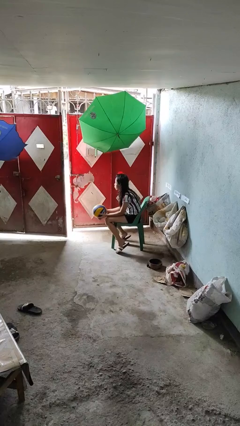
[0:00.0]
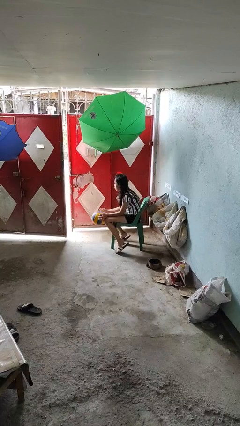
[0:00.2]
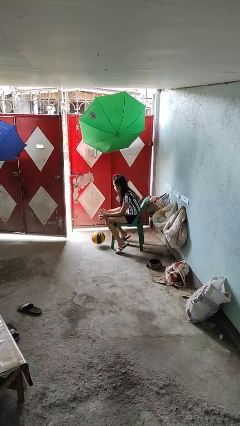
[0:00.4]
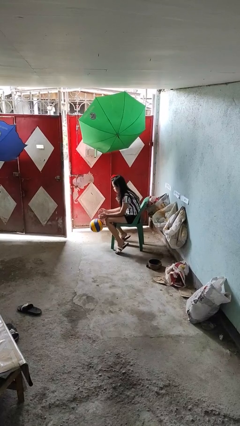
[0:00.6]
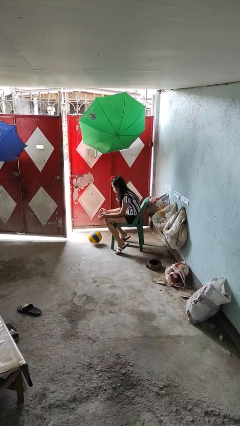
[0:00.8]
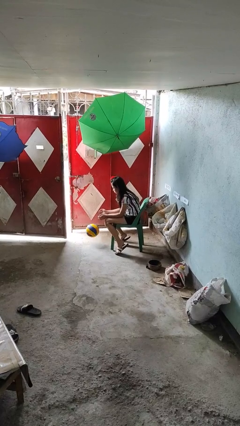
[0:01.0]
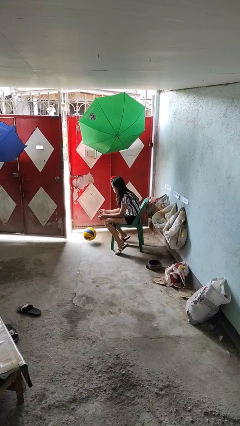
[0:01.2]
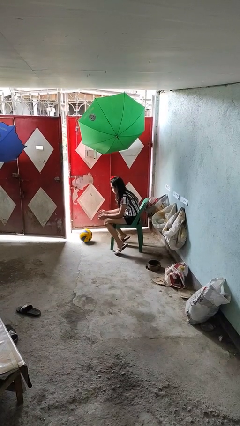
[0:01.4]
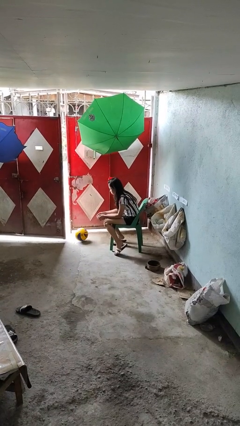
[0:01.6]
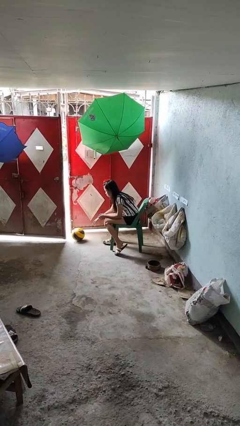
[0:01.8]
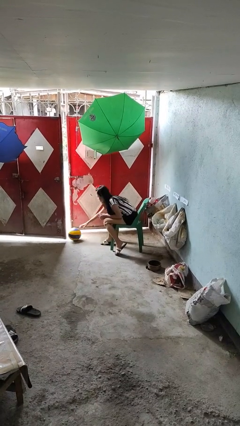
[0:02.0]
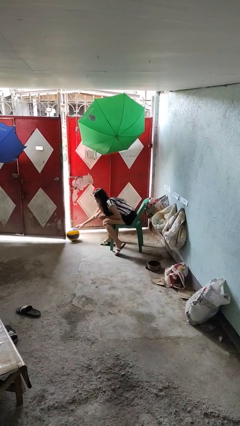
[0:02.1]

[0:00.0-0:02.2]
person drops object

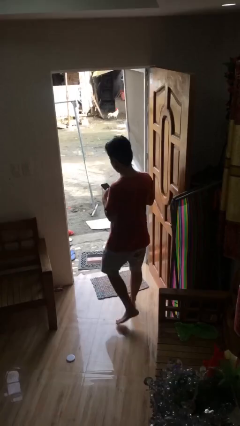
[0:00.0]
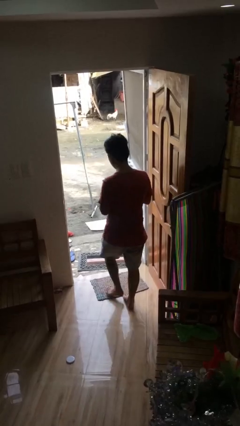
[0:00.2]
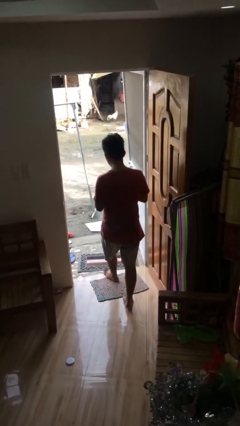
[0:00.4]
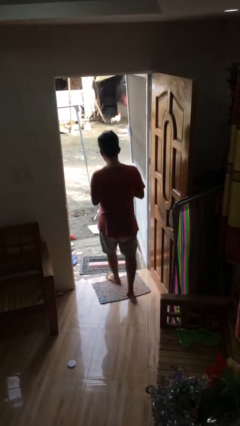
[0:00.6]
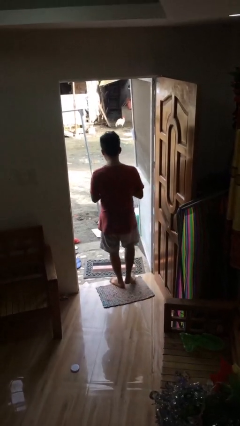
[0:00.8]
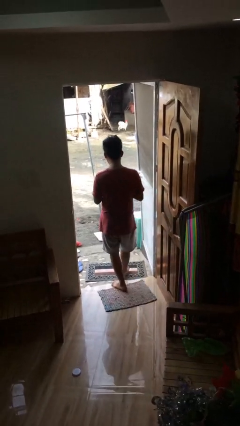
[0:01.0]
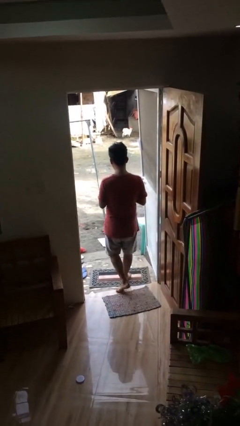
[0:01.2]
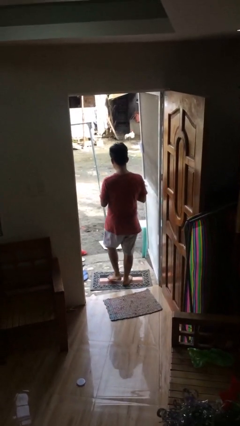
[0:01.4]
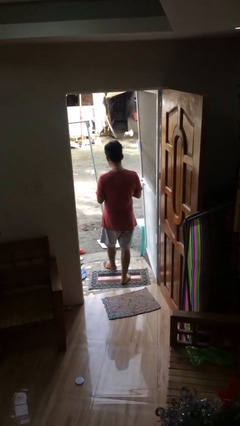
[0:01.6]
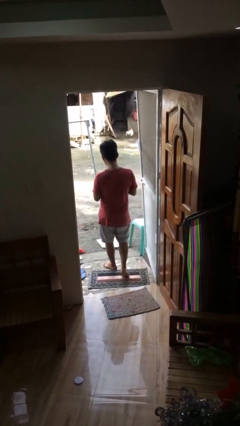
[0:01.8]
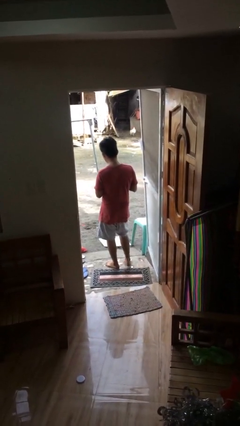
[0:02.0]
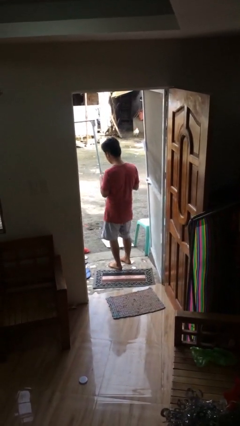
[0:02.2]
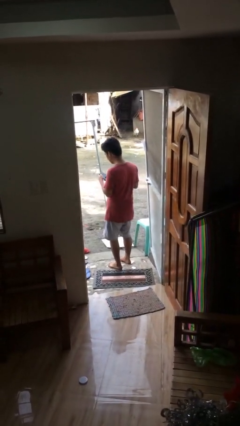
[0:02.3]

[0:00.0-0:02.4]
person exits scene through structure

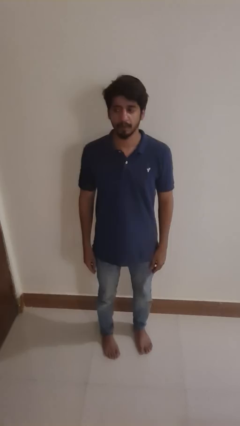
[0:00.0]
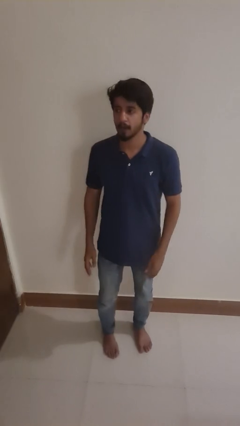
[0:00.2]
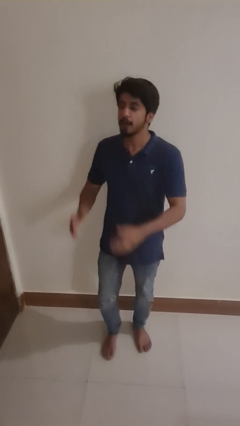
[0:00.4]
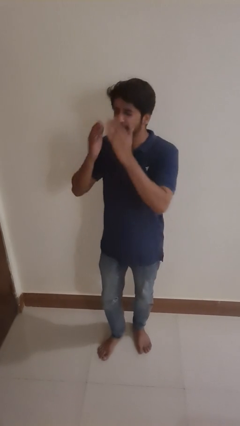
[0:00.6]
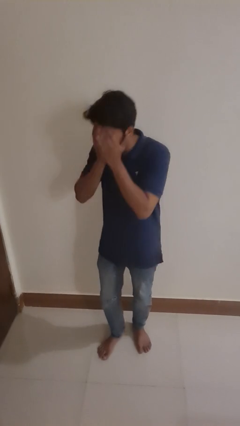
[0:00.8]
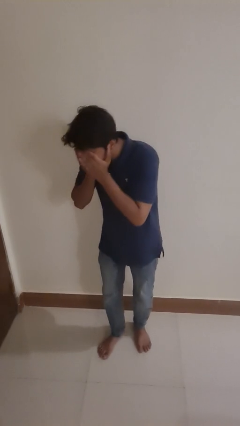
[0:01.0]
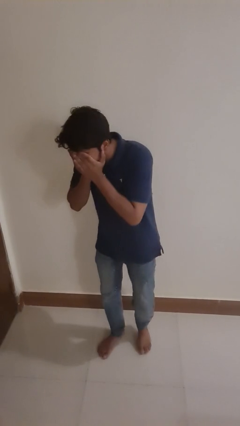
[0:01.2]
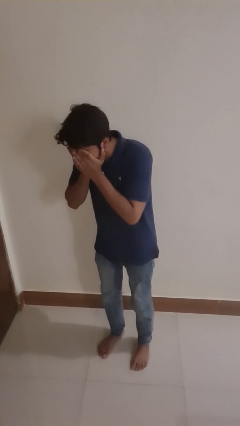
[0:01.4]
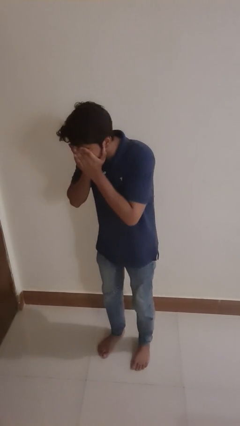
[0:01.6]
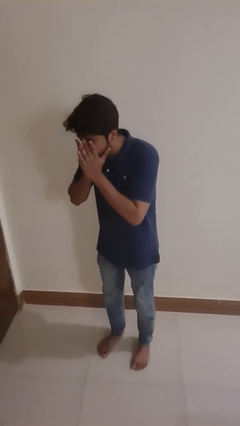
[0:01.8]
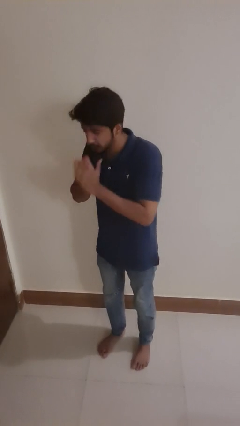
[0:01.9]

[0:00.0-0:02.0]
person sneezes into hand

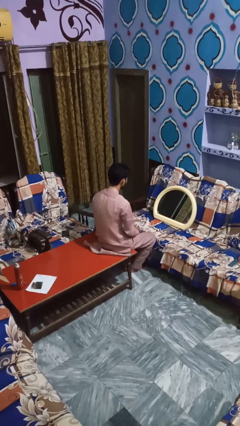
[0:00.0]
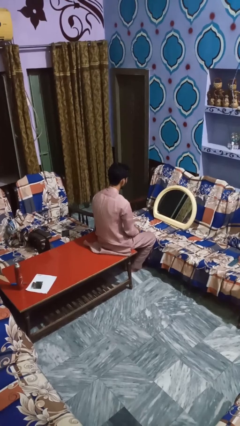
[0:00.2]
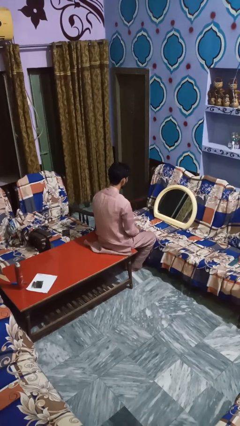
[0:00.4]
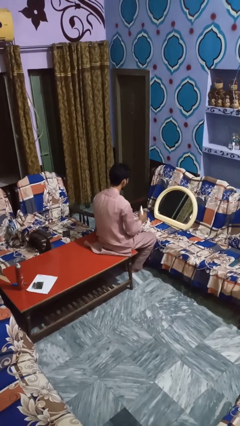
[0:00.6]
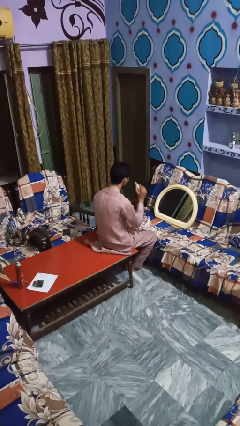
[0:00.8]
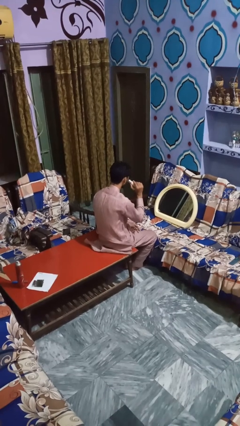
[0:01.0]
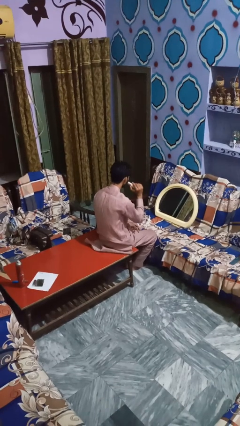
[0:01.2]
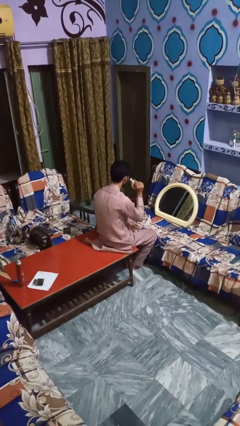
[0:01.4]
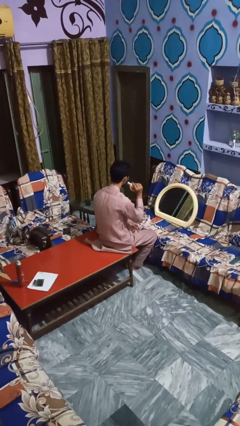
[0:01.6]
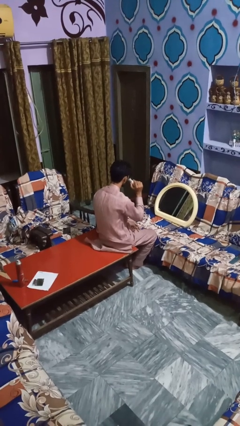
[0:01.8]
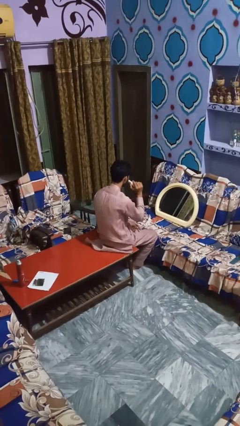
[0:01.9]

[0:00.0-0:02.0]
person applies foundation makeup

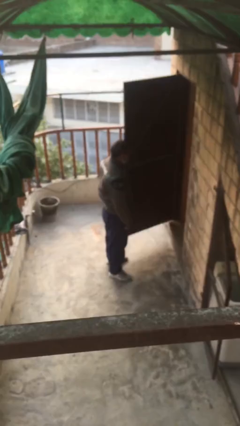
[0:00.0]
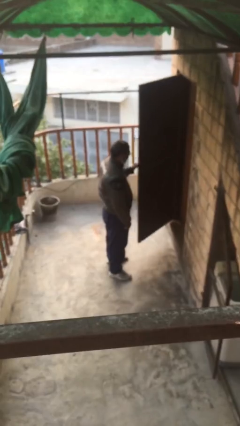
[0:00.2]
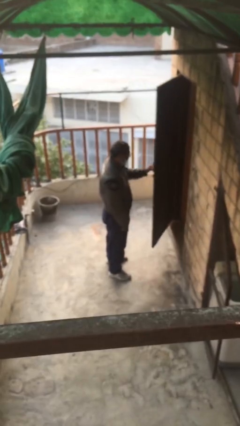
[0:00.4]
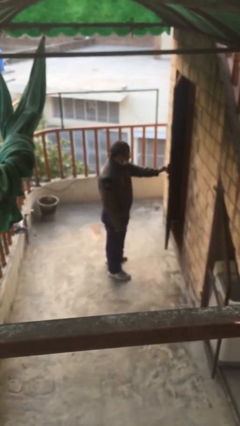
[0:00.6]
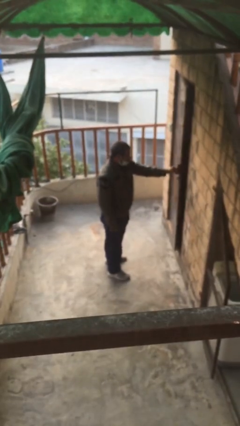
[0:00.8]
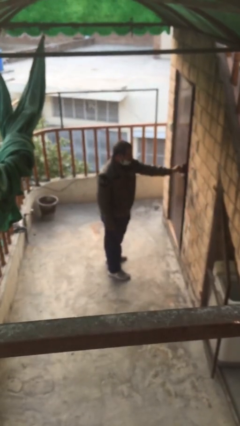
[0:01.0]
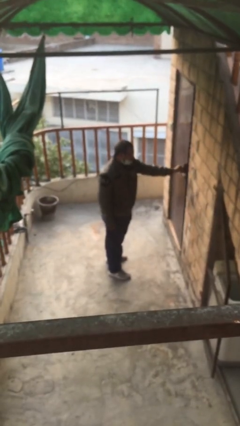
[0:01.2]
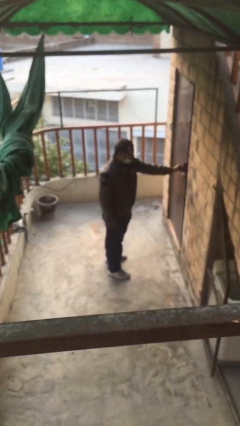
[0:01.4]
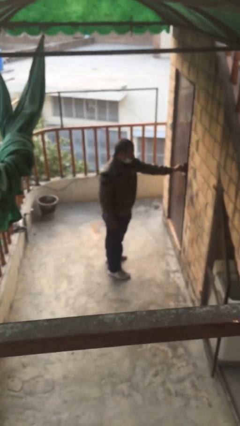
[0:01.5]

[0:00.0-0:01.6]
person closes facility door

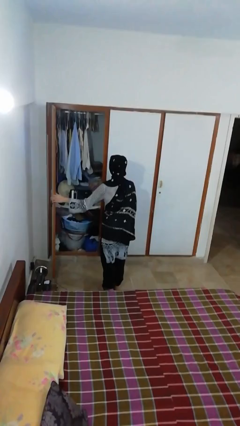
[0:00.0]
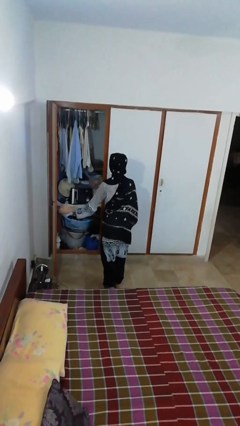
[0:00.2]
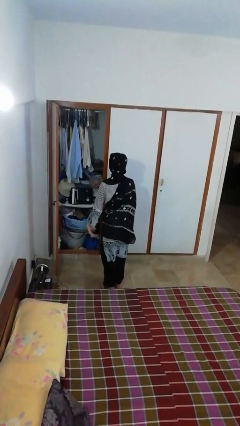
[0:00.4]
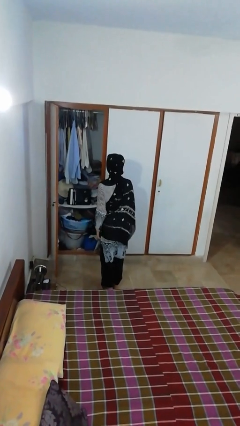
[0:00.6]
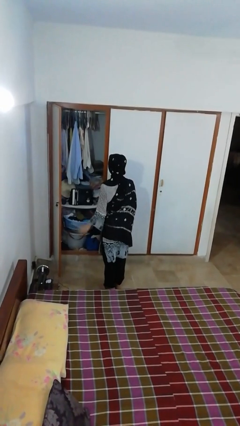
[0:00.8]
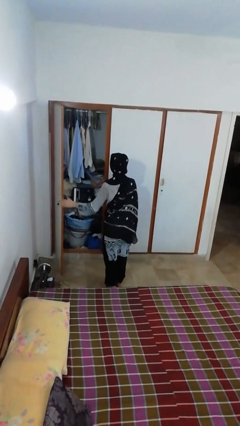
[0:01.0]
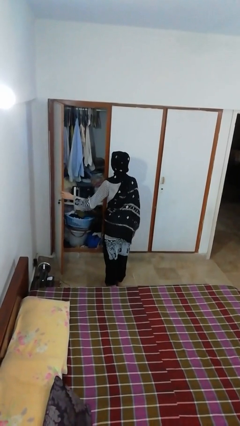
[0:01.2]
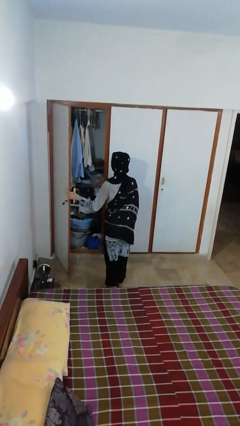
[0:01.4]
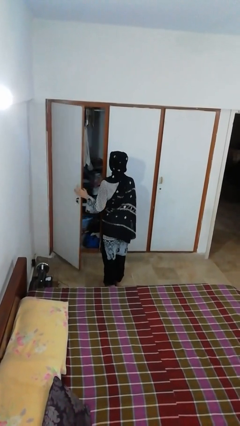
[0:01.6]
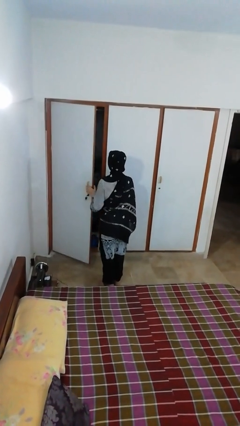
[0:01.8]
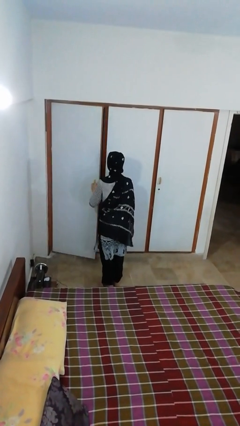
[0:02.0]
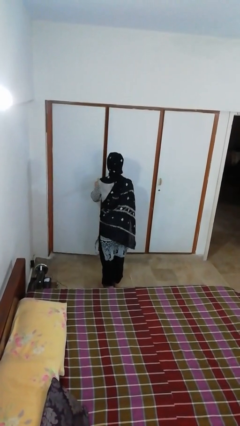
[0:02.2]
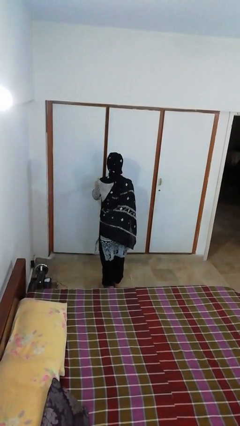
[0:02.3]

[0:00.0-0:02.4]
person closes closet door

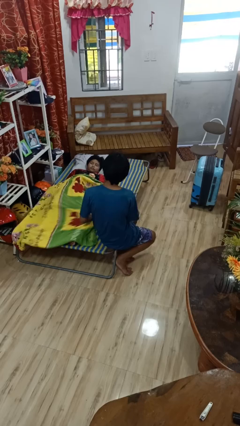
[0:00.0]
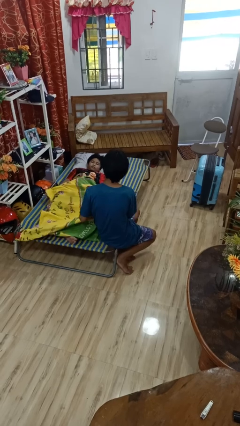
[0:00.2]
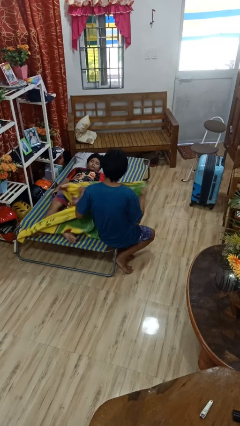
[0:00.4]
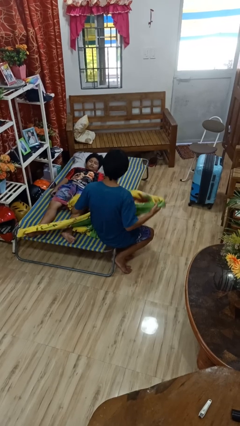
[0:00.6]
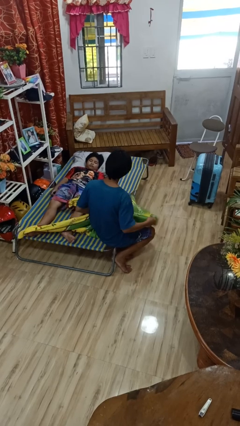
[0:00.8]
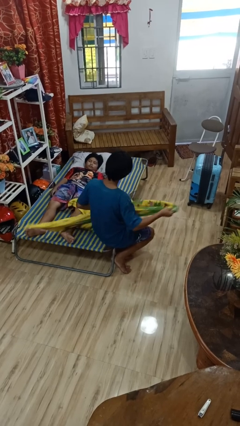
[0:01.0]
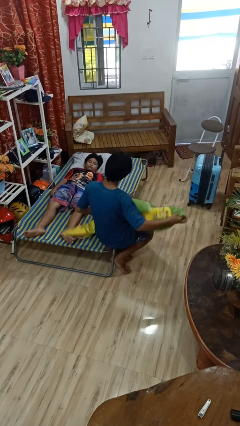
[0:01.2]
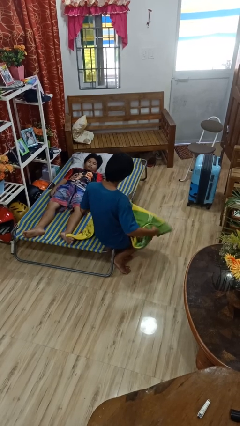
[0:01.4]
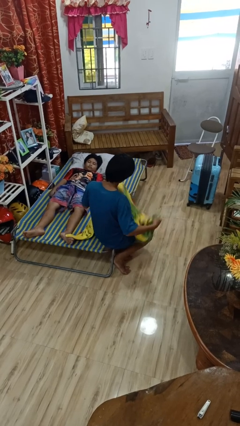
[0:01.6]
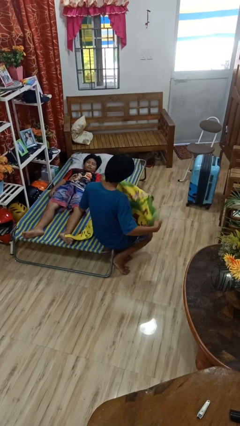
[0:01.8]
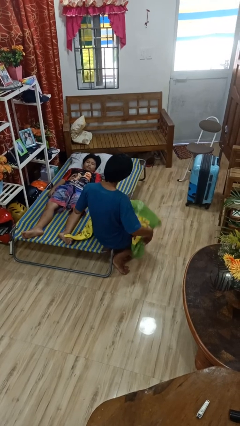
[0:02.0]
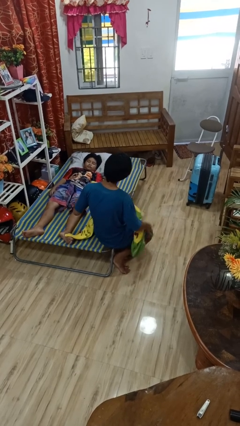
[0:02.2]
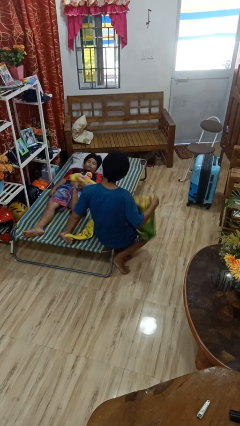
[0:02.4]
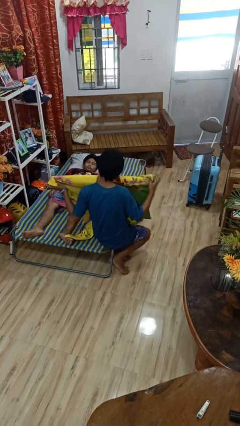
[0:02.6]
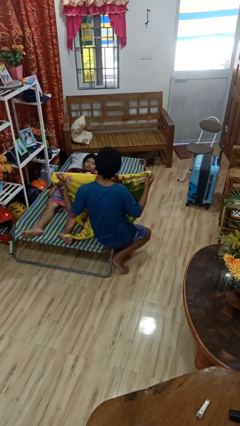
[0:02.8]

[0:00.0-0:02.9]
person uncovers friend with blanket

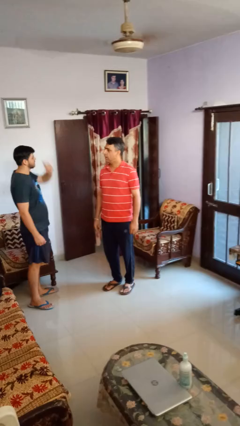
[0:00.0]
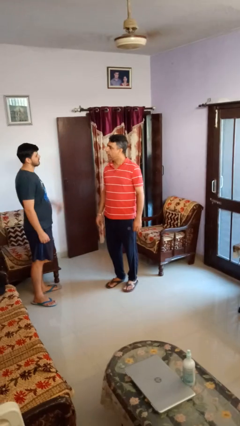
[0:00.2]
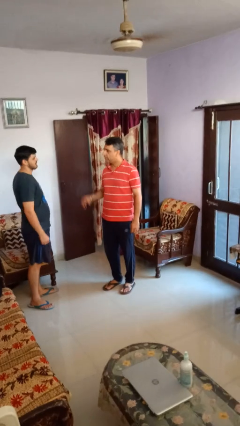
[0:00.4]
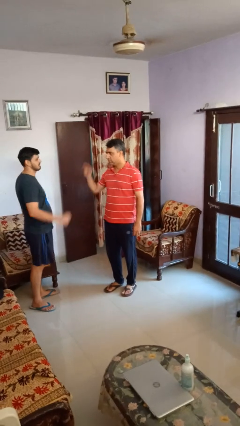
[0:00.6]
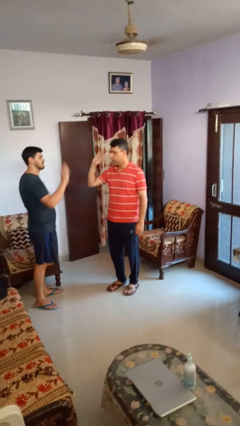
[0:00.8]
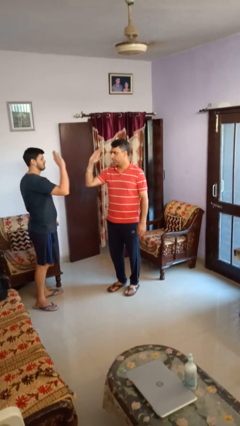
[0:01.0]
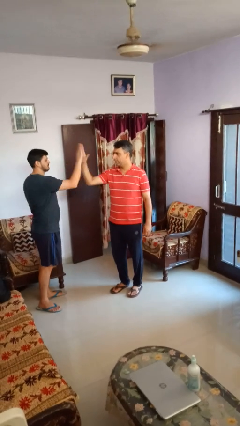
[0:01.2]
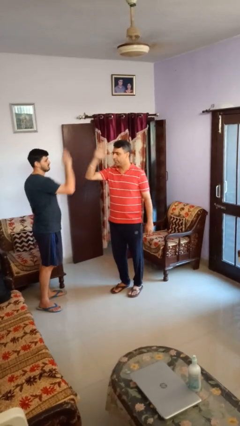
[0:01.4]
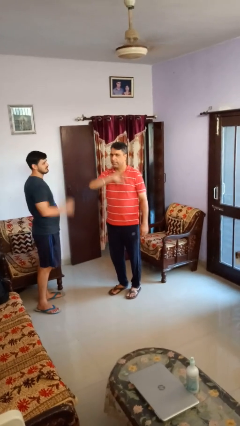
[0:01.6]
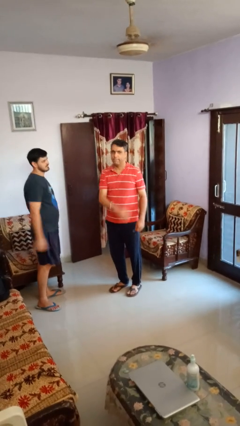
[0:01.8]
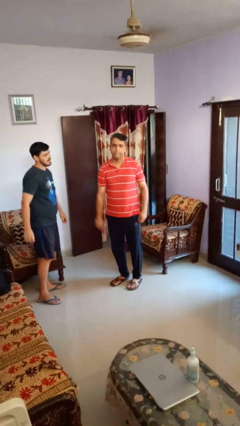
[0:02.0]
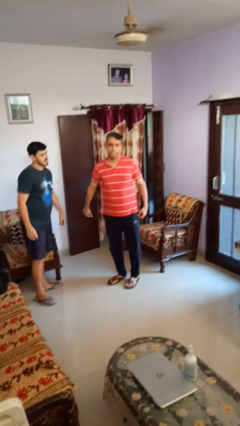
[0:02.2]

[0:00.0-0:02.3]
person highfives hand
